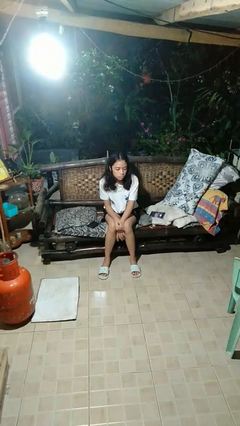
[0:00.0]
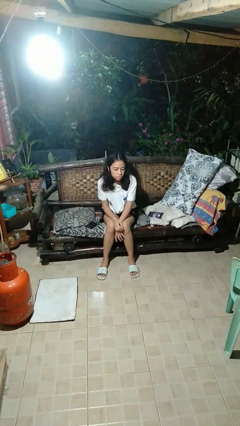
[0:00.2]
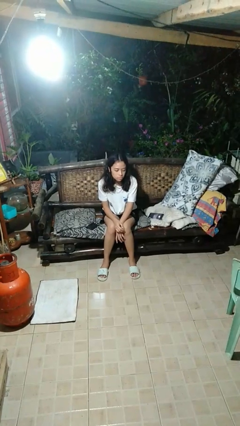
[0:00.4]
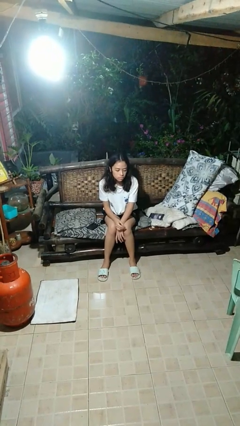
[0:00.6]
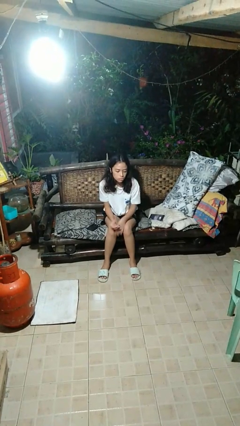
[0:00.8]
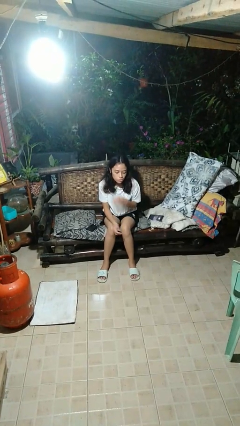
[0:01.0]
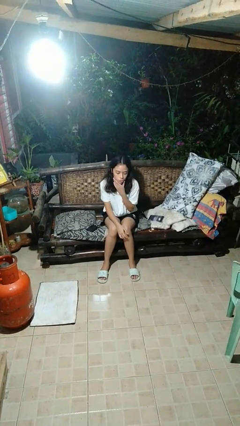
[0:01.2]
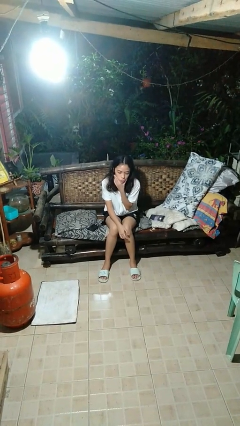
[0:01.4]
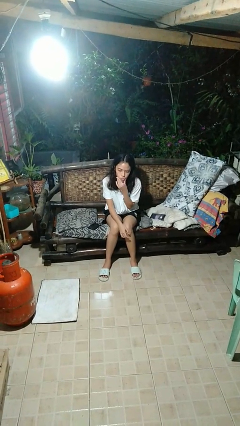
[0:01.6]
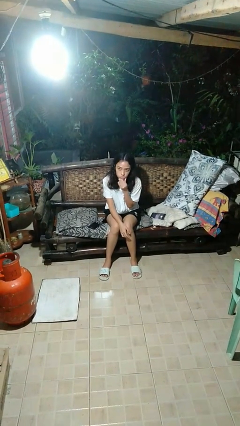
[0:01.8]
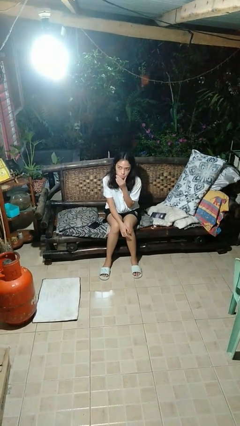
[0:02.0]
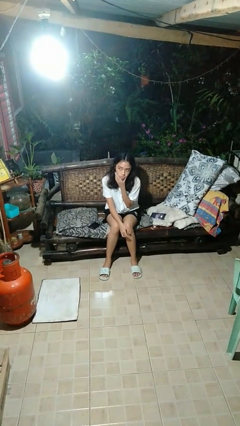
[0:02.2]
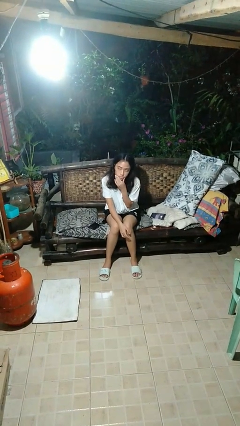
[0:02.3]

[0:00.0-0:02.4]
person strokes chin

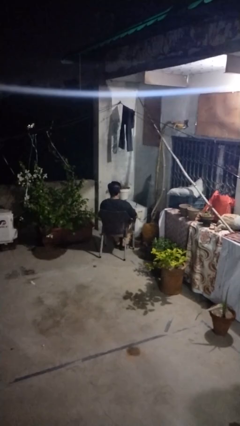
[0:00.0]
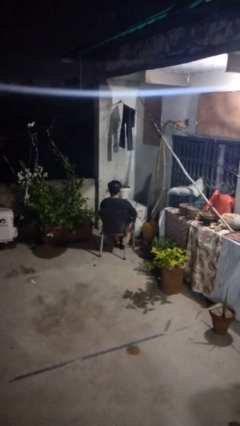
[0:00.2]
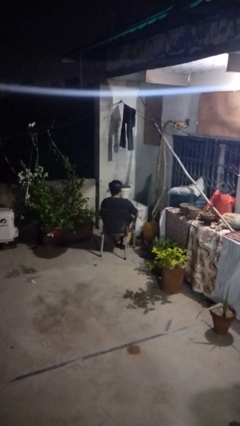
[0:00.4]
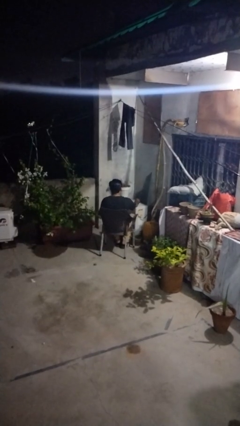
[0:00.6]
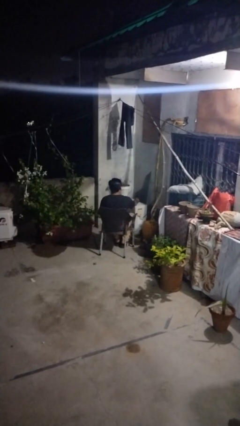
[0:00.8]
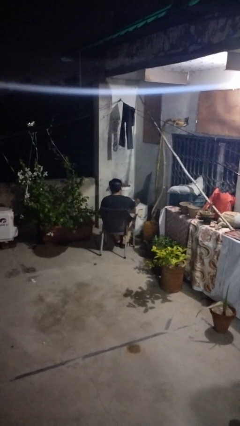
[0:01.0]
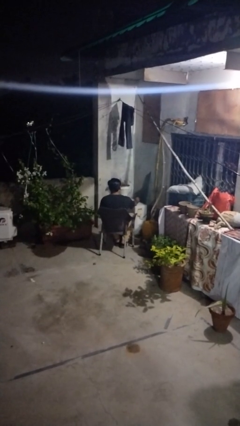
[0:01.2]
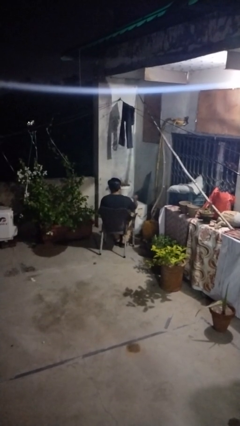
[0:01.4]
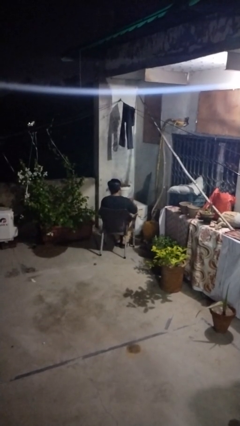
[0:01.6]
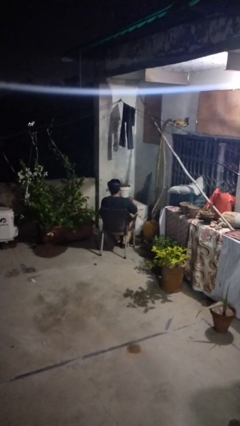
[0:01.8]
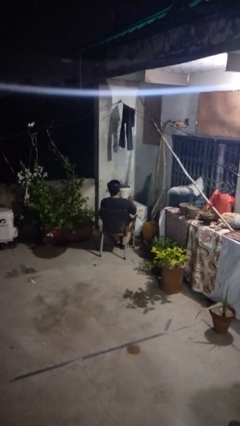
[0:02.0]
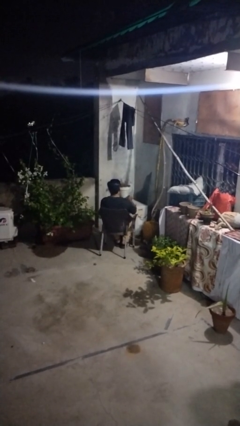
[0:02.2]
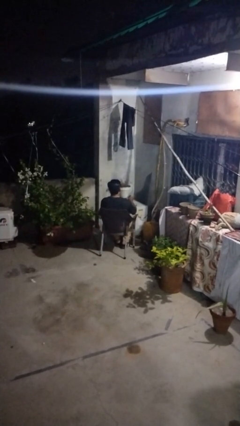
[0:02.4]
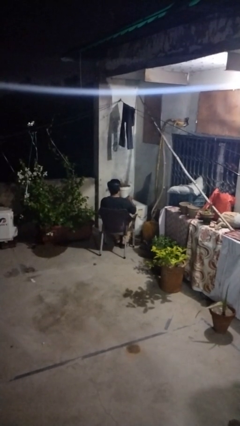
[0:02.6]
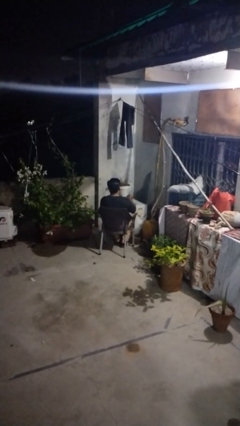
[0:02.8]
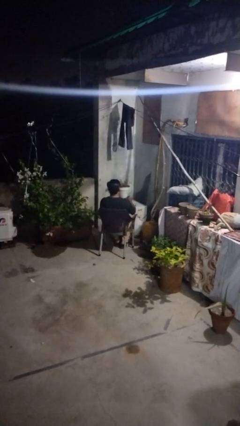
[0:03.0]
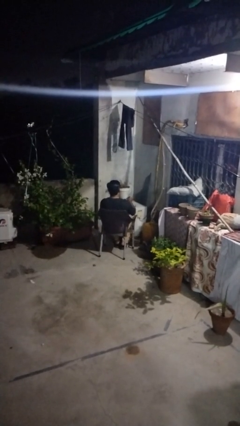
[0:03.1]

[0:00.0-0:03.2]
person paints fingernails

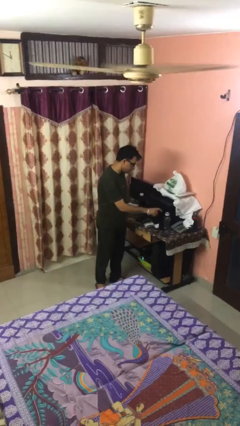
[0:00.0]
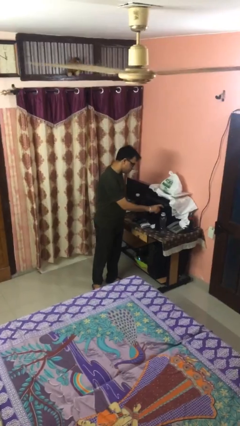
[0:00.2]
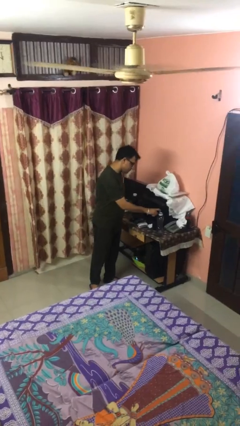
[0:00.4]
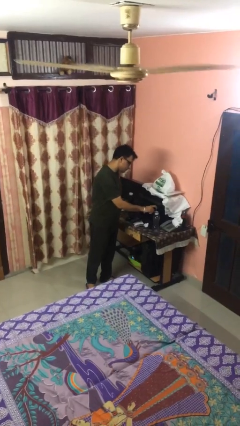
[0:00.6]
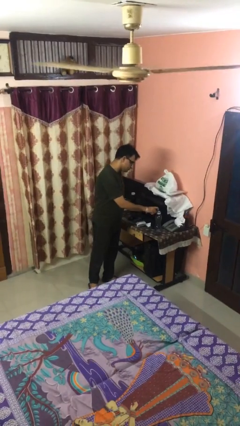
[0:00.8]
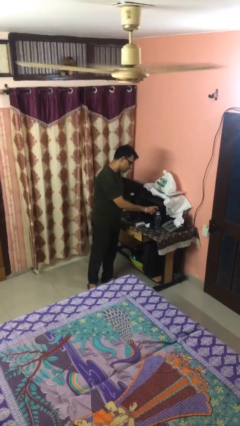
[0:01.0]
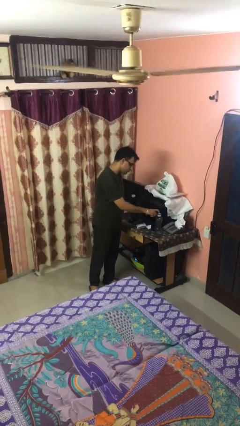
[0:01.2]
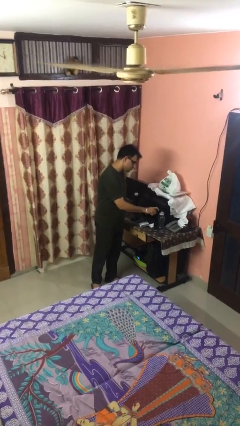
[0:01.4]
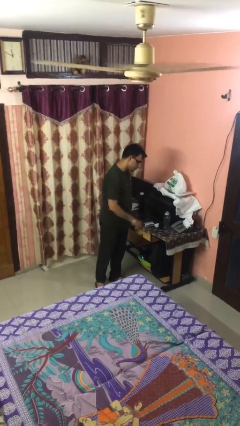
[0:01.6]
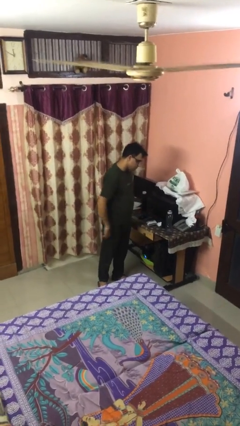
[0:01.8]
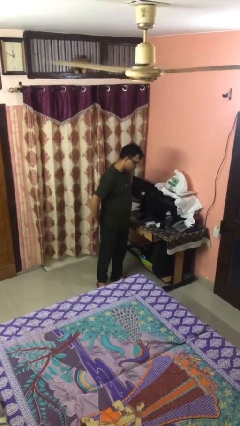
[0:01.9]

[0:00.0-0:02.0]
person taps object with finger

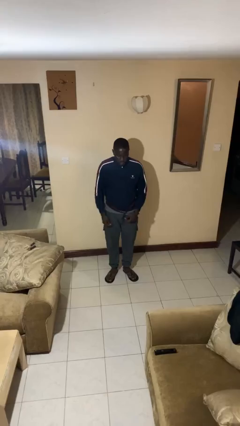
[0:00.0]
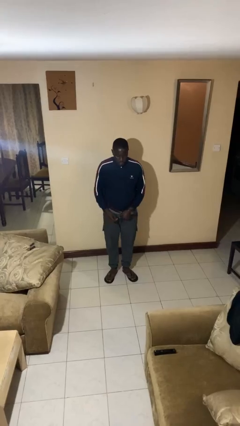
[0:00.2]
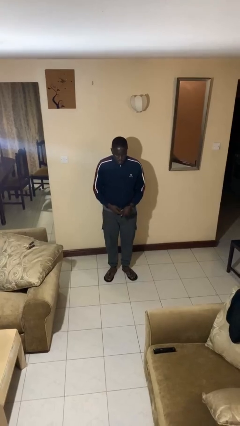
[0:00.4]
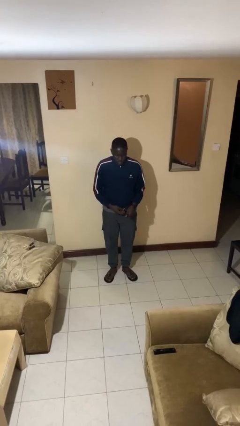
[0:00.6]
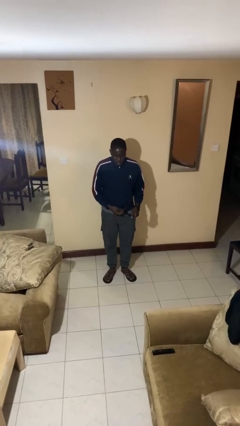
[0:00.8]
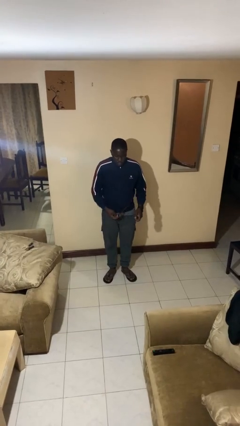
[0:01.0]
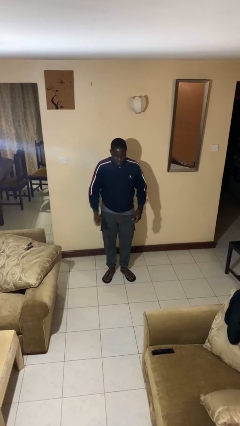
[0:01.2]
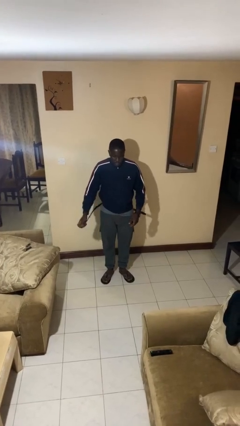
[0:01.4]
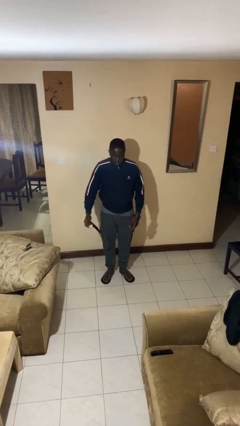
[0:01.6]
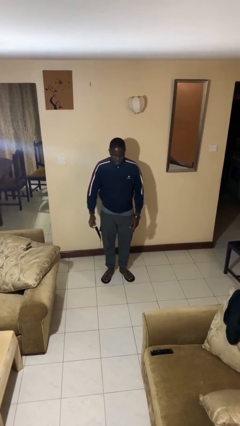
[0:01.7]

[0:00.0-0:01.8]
person takes off belt

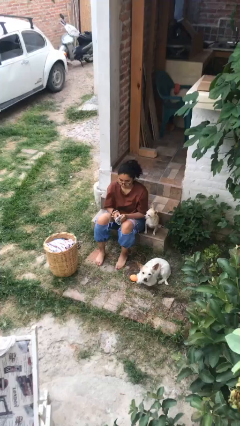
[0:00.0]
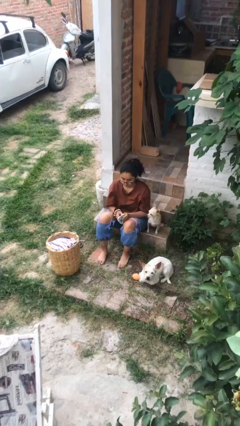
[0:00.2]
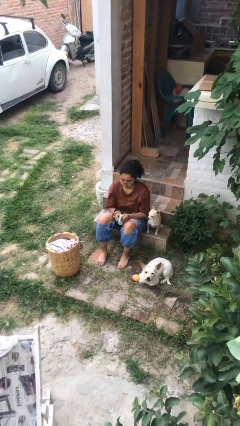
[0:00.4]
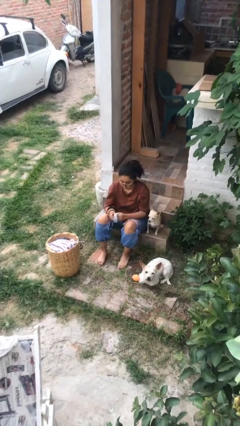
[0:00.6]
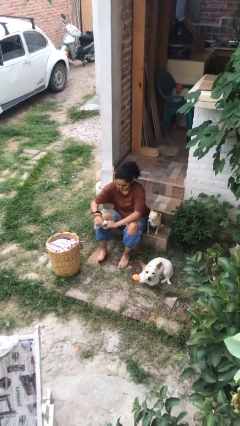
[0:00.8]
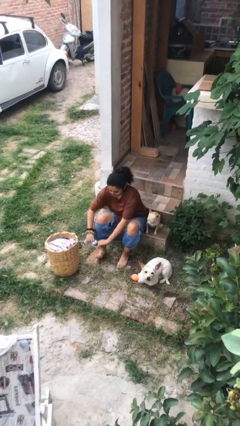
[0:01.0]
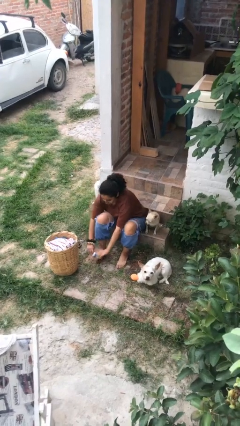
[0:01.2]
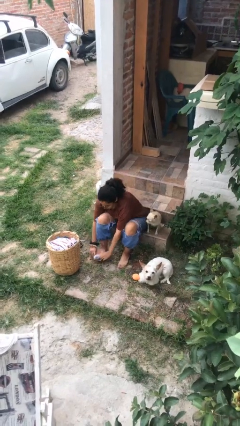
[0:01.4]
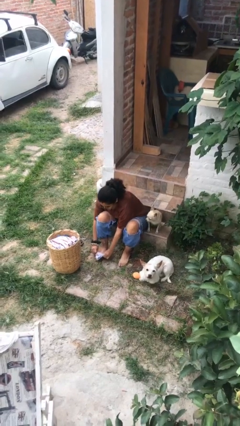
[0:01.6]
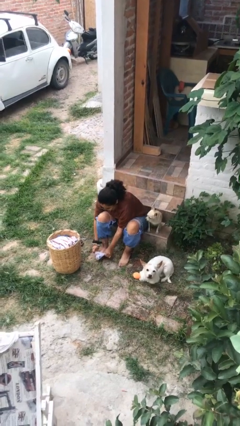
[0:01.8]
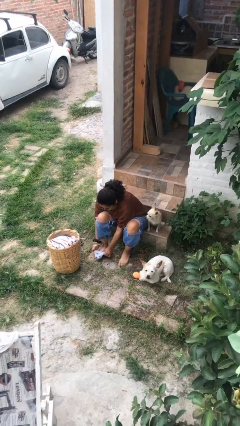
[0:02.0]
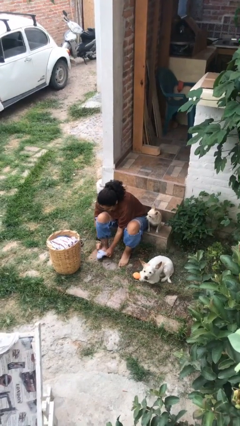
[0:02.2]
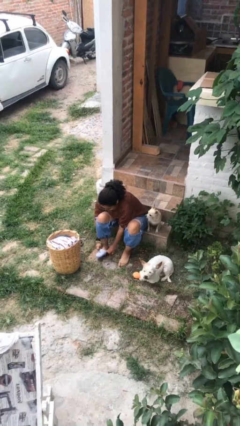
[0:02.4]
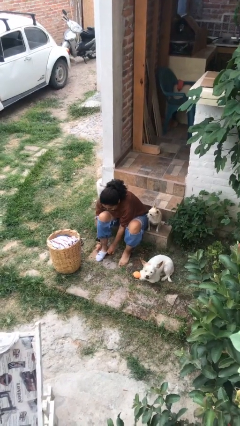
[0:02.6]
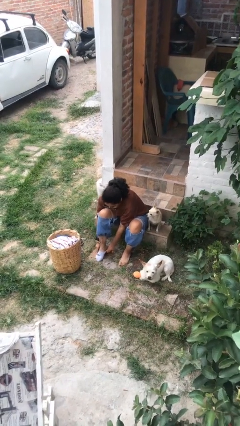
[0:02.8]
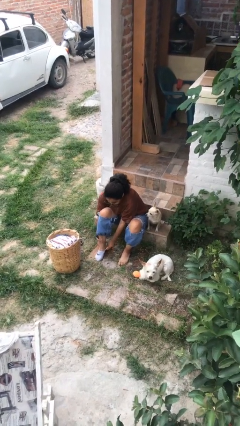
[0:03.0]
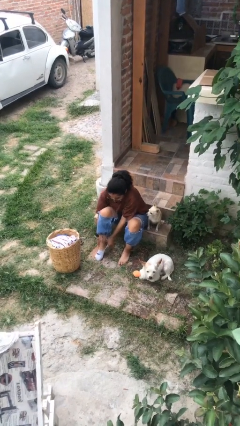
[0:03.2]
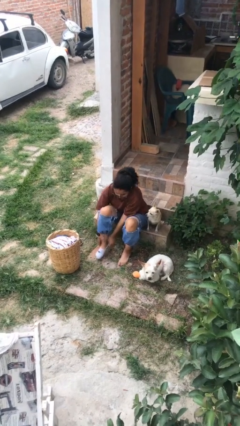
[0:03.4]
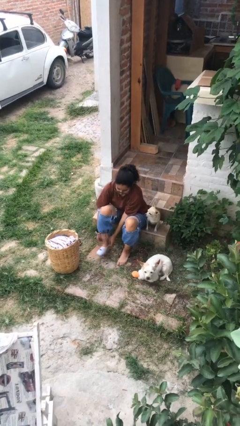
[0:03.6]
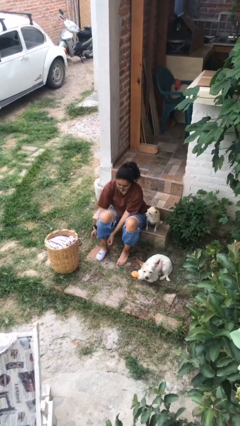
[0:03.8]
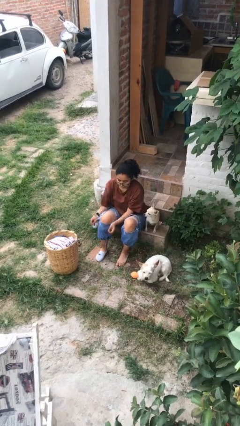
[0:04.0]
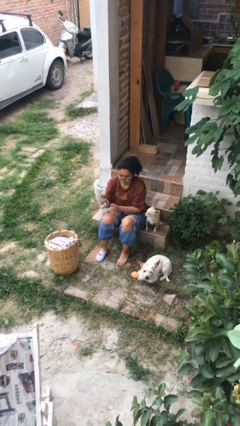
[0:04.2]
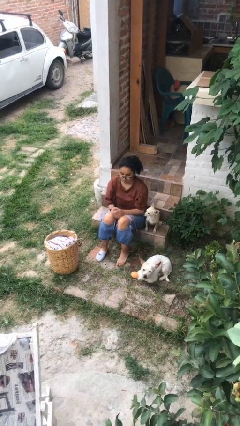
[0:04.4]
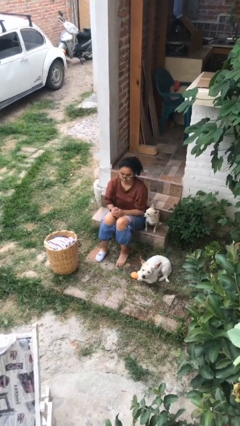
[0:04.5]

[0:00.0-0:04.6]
person puts on socks

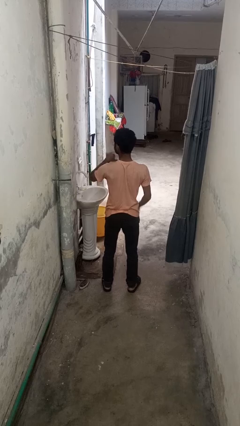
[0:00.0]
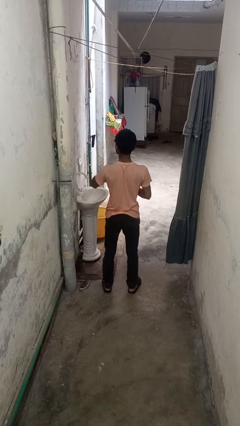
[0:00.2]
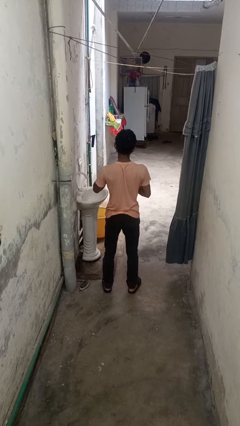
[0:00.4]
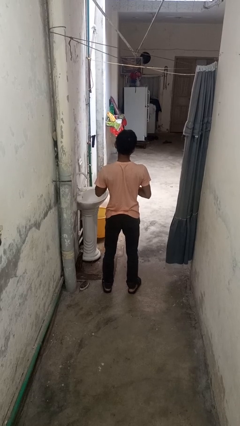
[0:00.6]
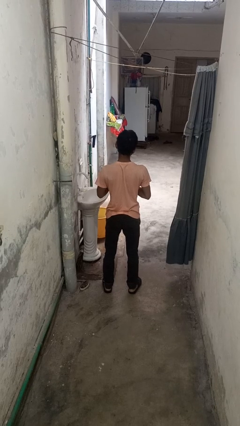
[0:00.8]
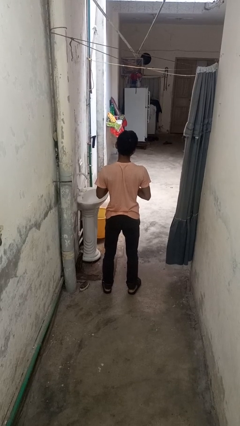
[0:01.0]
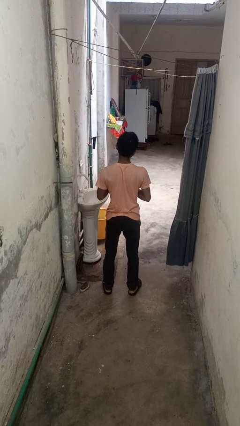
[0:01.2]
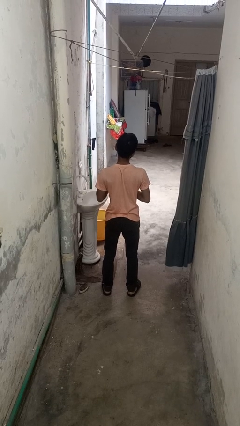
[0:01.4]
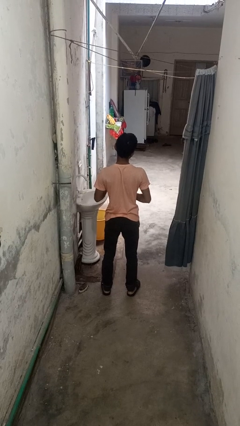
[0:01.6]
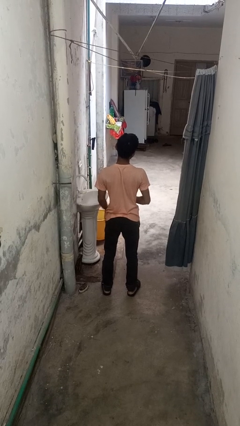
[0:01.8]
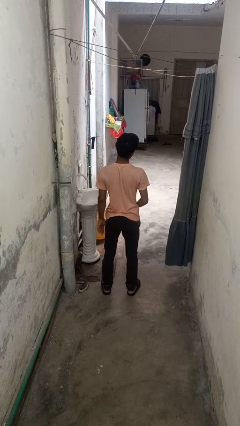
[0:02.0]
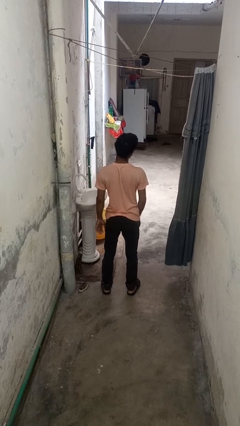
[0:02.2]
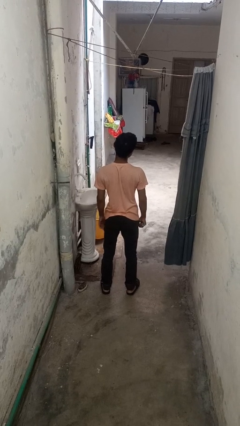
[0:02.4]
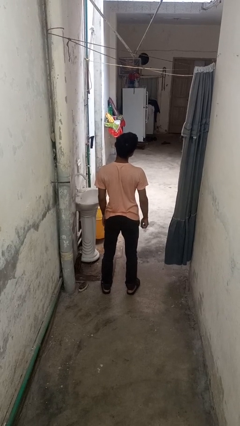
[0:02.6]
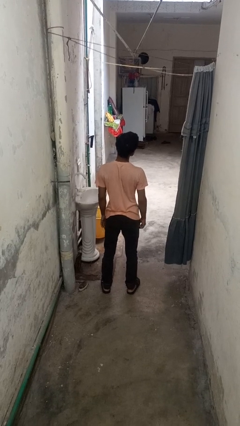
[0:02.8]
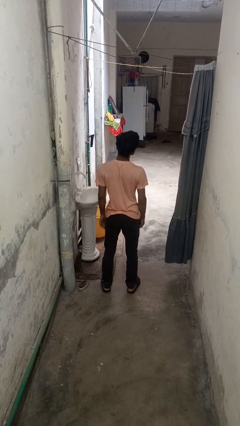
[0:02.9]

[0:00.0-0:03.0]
person takes off ring

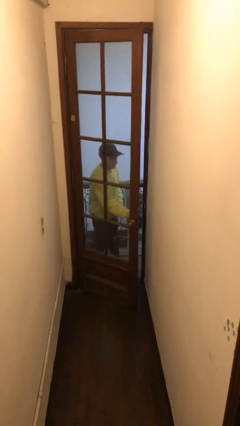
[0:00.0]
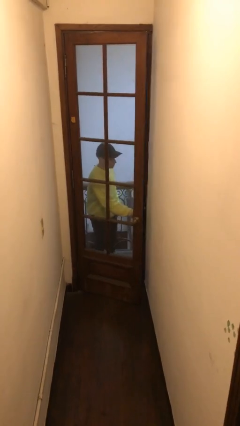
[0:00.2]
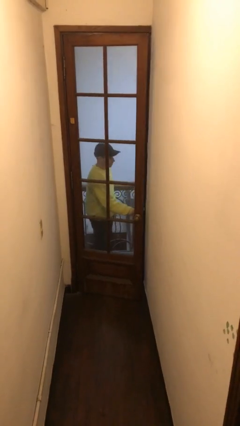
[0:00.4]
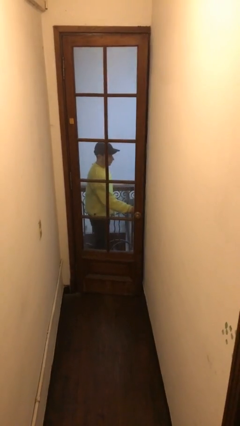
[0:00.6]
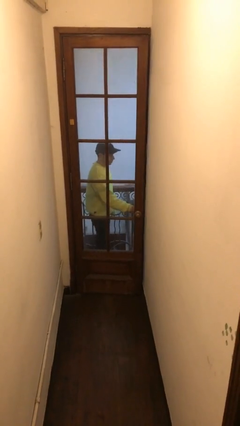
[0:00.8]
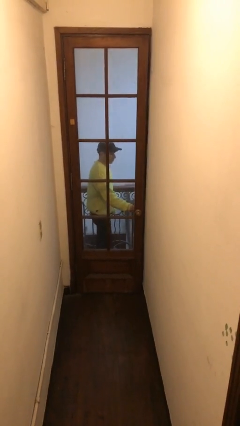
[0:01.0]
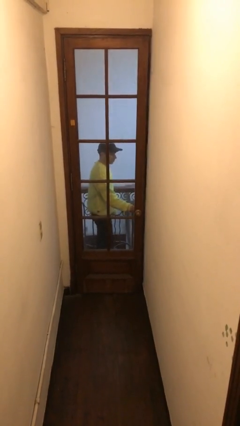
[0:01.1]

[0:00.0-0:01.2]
person closes facility door
